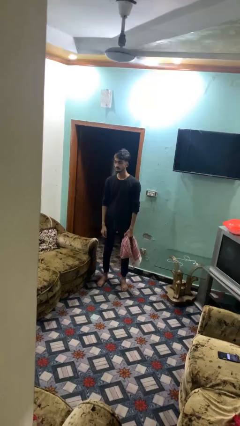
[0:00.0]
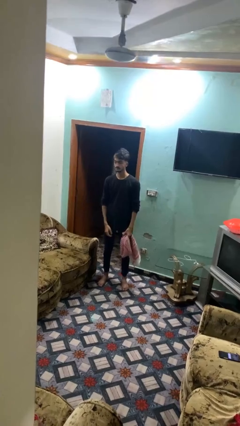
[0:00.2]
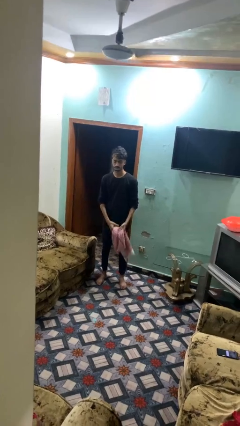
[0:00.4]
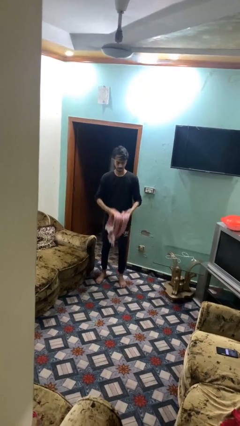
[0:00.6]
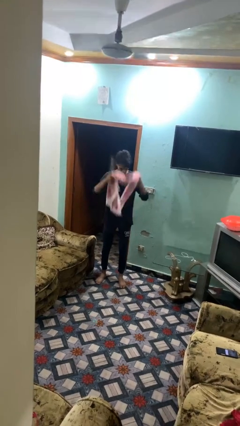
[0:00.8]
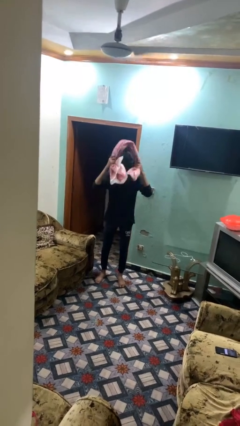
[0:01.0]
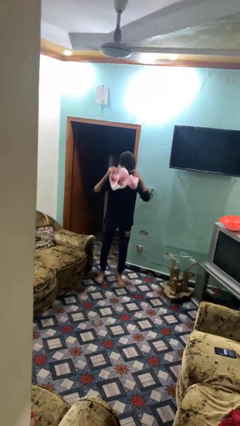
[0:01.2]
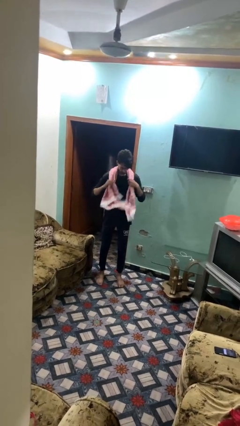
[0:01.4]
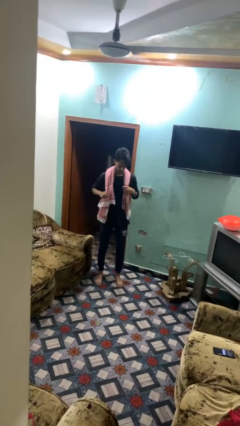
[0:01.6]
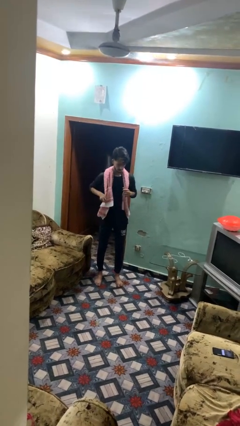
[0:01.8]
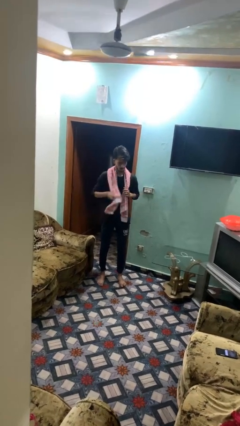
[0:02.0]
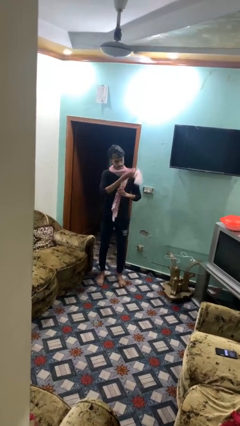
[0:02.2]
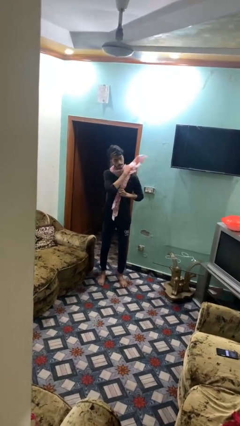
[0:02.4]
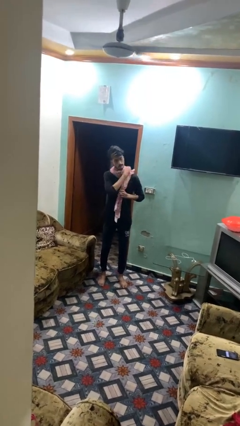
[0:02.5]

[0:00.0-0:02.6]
person puts on scarf

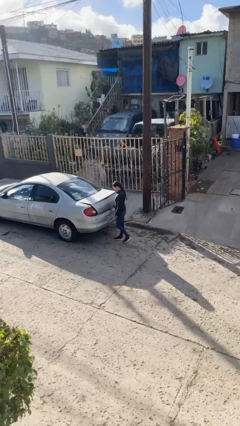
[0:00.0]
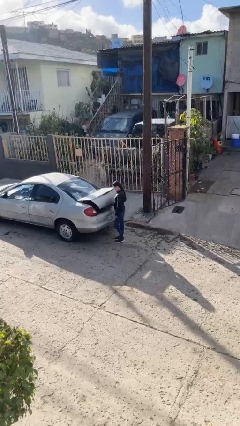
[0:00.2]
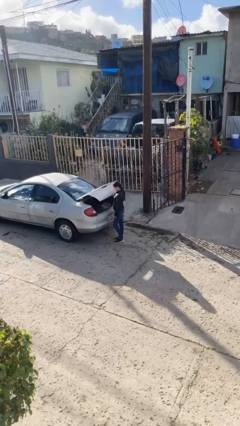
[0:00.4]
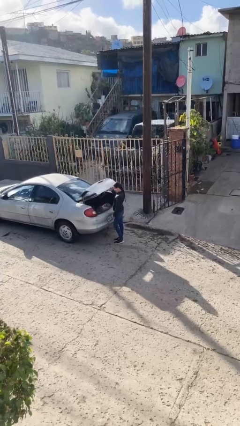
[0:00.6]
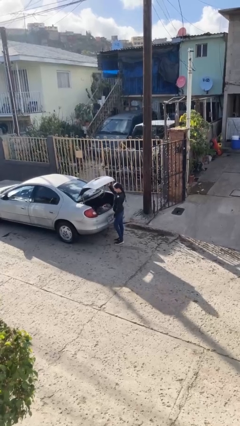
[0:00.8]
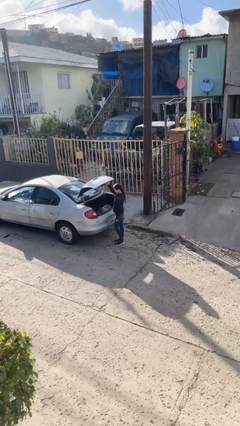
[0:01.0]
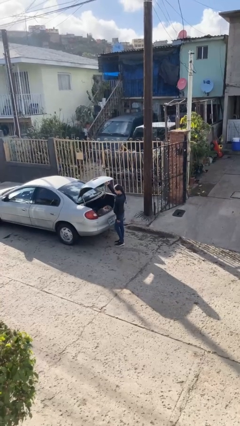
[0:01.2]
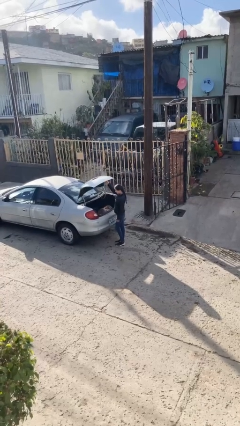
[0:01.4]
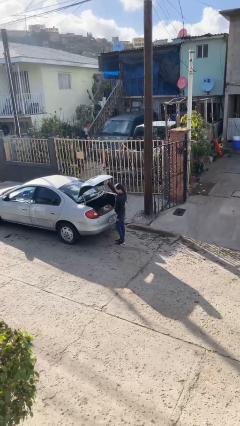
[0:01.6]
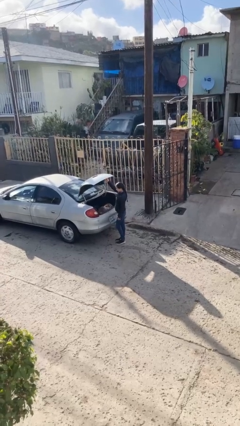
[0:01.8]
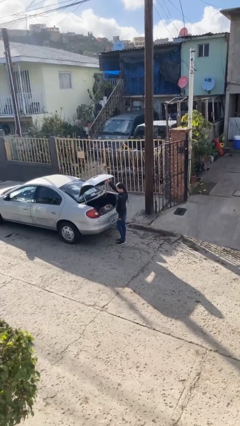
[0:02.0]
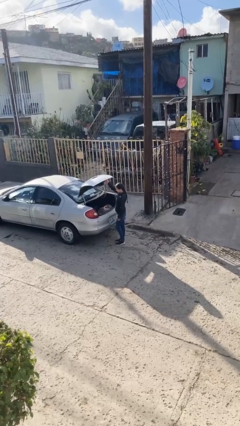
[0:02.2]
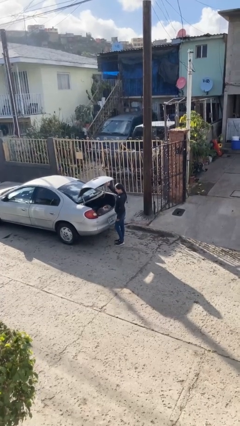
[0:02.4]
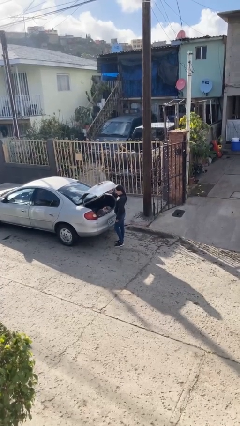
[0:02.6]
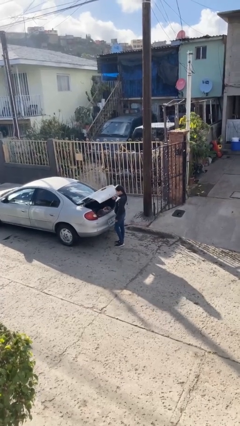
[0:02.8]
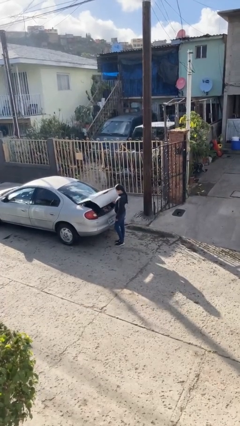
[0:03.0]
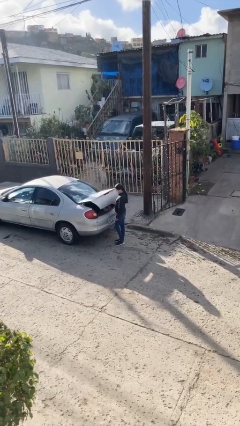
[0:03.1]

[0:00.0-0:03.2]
person opens car trunk

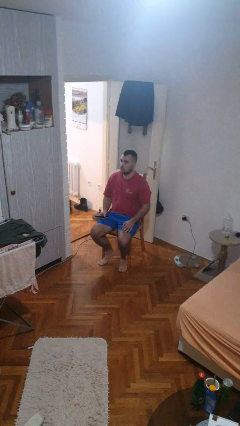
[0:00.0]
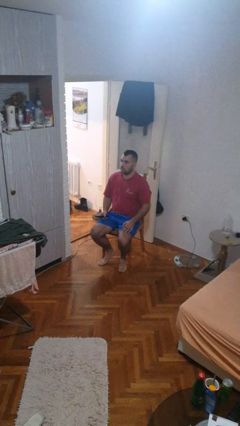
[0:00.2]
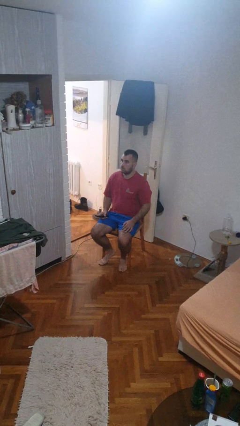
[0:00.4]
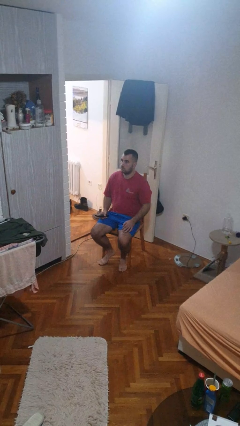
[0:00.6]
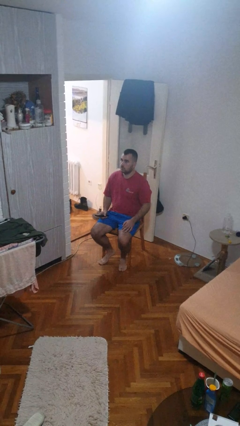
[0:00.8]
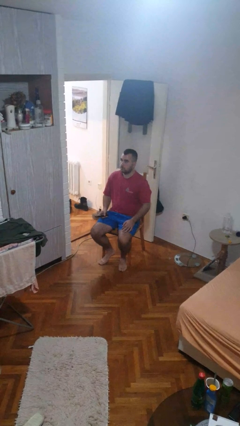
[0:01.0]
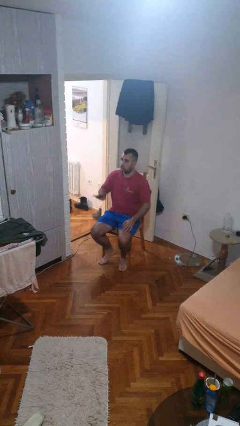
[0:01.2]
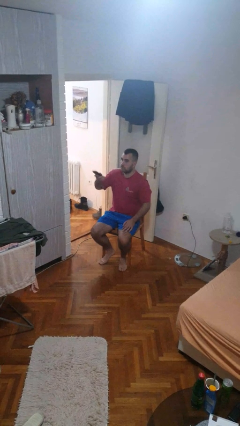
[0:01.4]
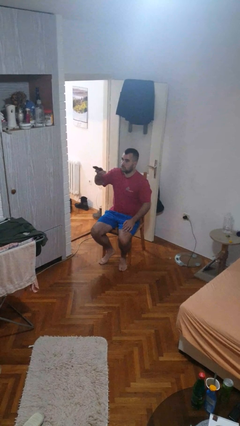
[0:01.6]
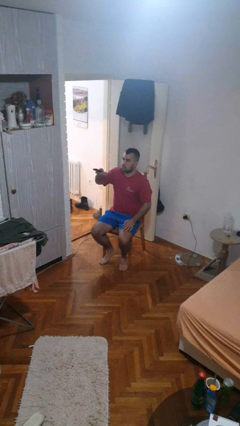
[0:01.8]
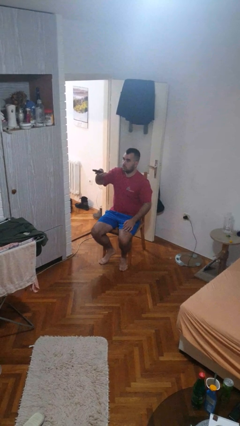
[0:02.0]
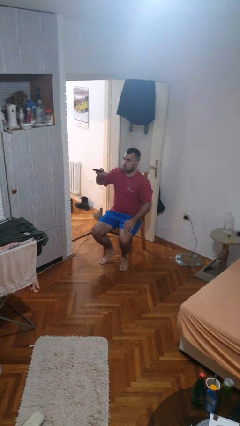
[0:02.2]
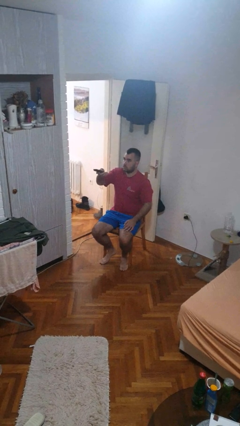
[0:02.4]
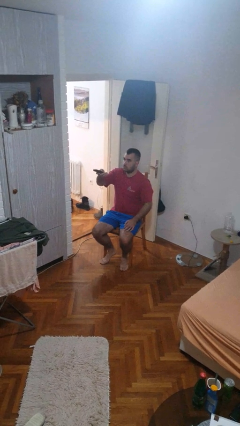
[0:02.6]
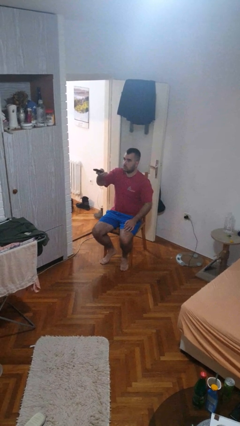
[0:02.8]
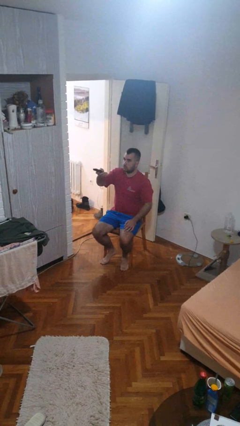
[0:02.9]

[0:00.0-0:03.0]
person uses television remote

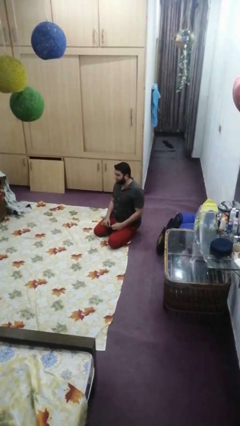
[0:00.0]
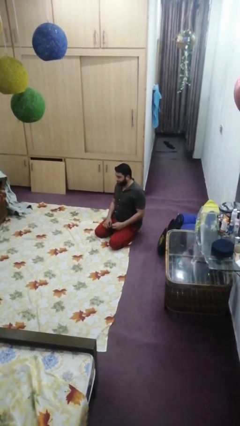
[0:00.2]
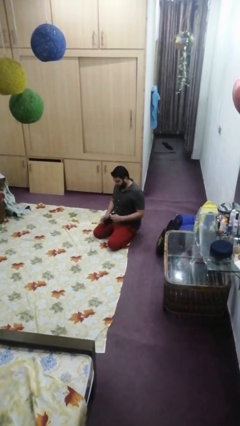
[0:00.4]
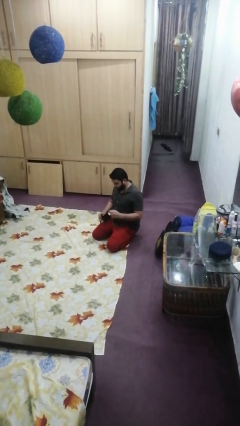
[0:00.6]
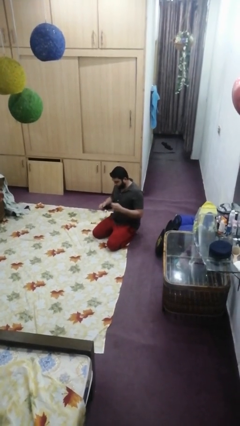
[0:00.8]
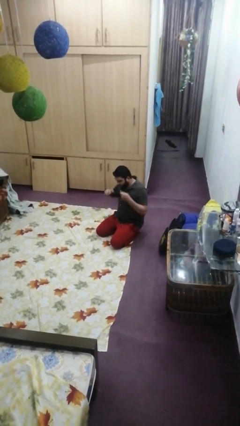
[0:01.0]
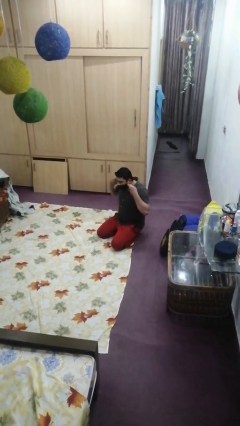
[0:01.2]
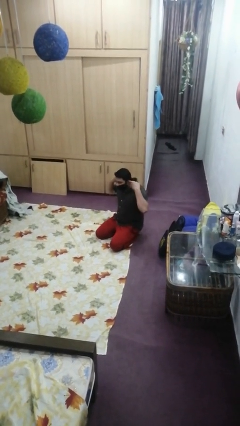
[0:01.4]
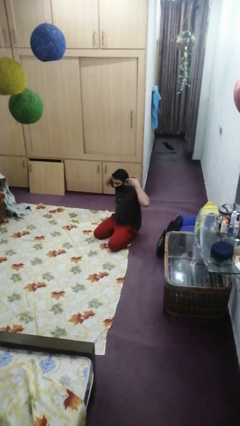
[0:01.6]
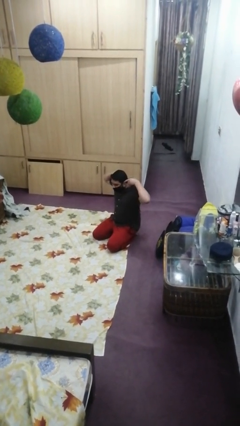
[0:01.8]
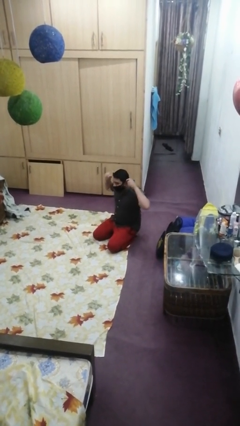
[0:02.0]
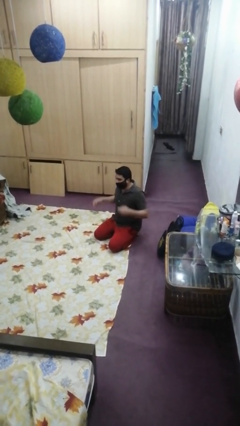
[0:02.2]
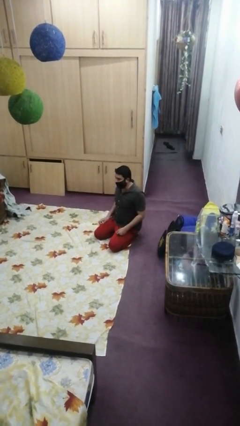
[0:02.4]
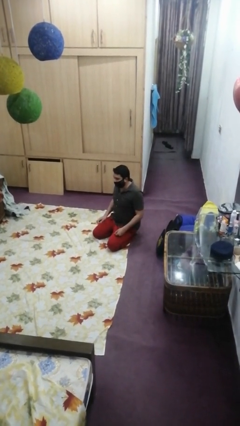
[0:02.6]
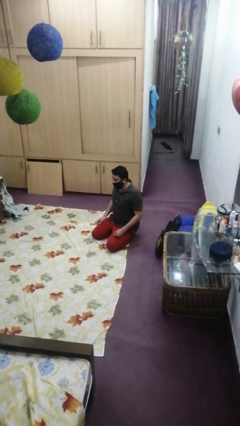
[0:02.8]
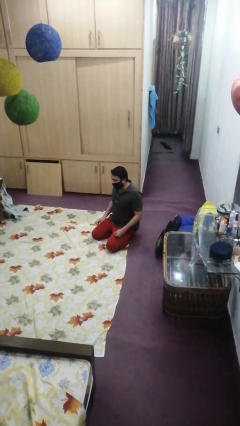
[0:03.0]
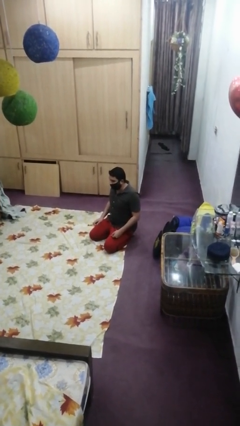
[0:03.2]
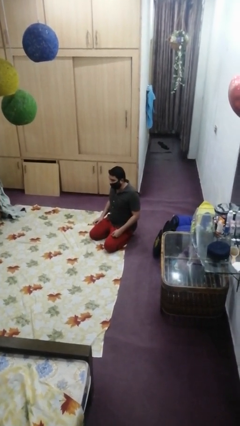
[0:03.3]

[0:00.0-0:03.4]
person puts on facemask

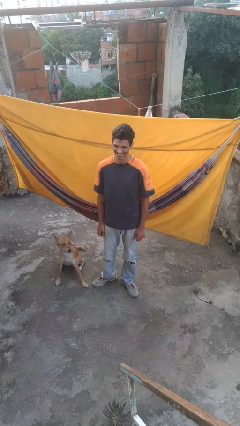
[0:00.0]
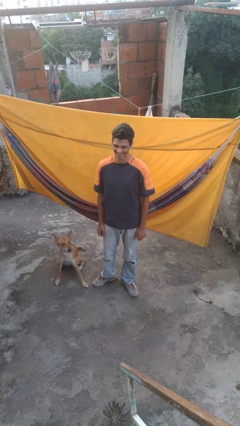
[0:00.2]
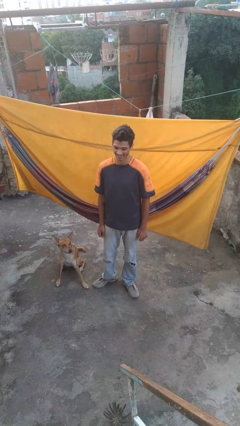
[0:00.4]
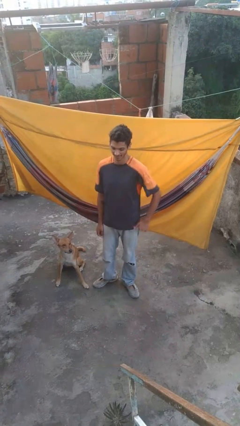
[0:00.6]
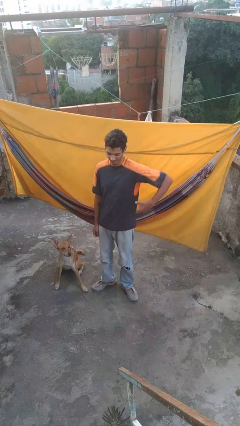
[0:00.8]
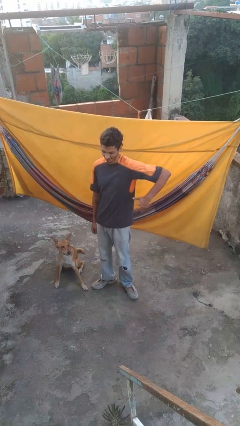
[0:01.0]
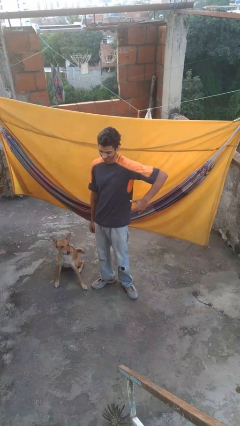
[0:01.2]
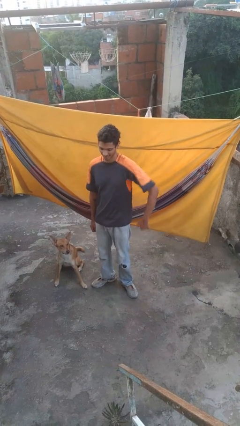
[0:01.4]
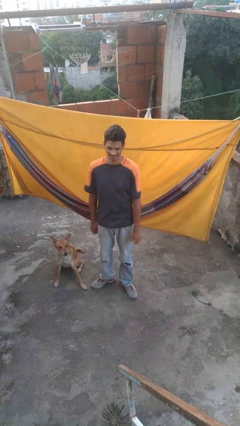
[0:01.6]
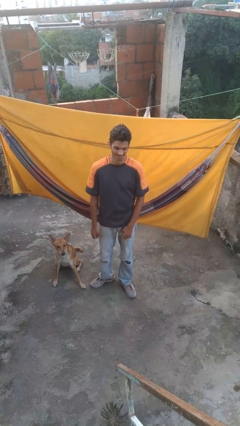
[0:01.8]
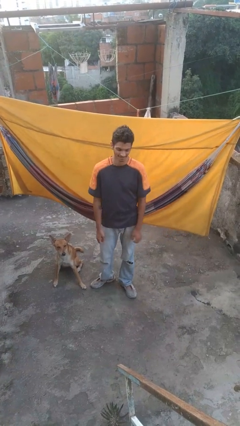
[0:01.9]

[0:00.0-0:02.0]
person gestures hang loose

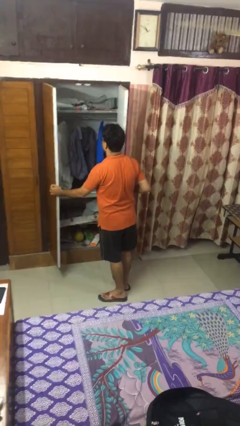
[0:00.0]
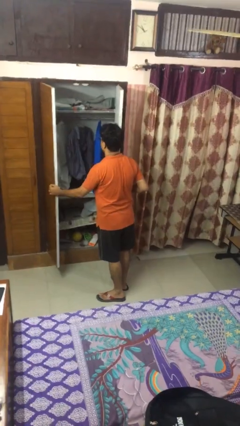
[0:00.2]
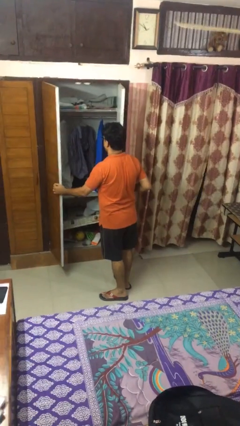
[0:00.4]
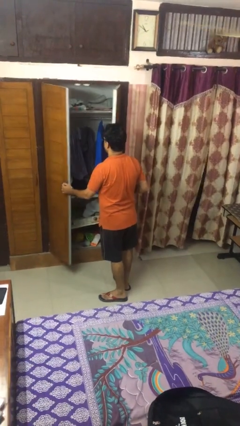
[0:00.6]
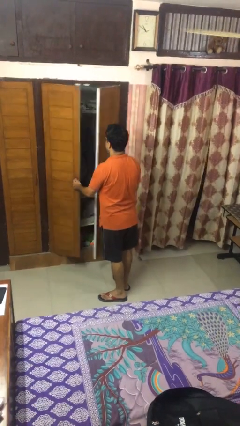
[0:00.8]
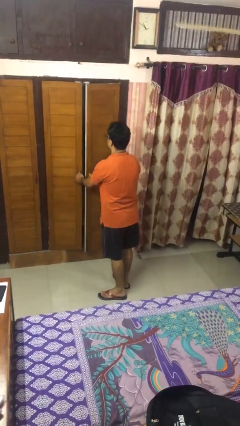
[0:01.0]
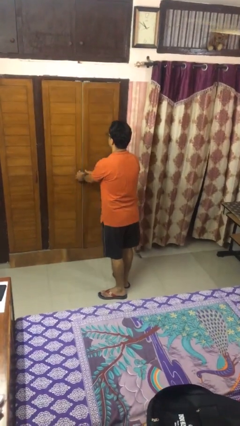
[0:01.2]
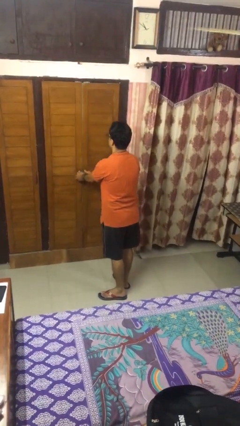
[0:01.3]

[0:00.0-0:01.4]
person closes closet door

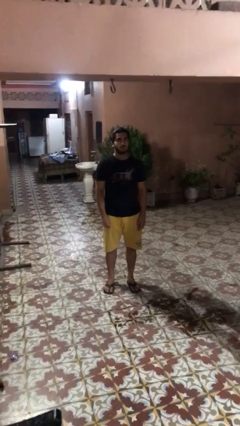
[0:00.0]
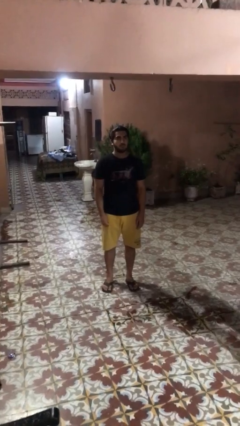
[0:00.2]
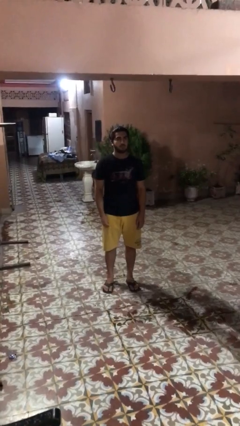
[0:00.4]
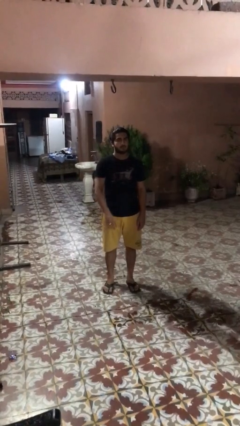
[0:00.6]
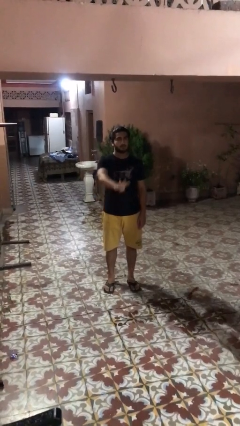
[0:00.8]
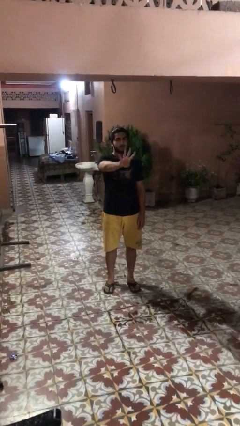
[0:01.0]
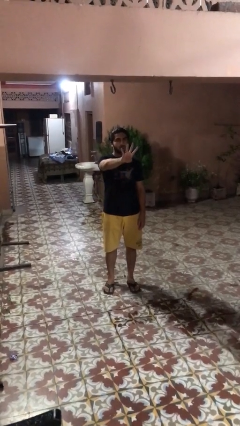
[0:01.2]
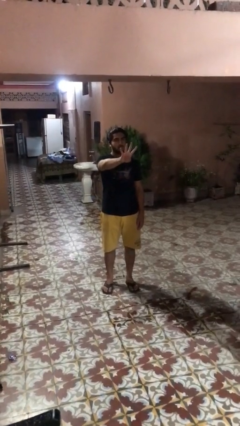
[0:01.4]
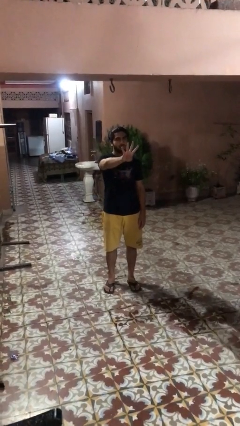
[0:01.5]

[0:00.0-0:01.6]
person gestures number four
